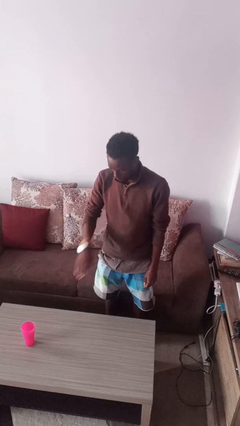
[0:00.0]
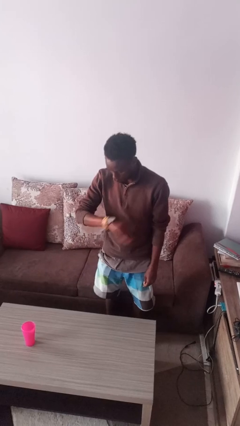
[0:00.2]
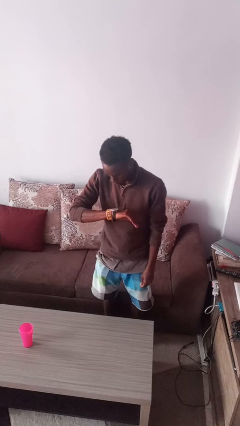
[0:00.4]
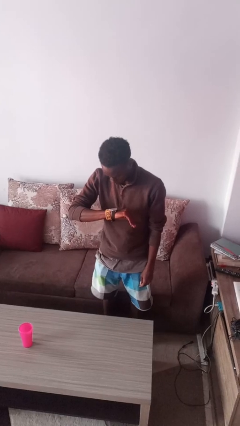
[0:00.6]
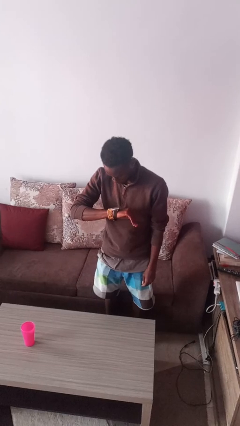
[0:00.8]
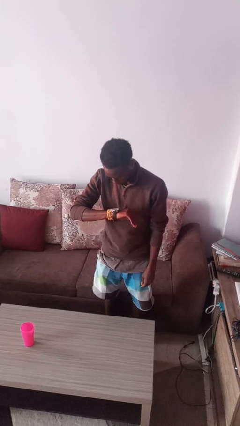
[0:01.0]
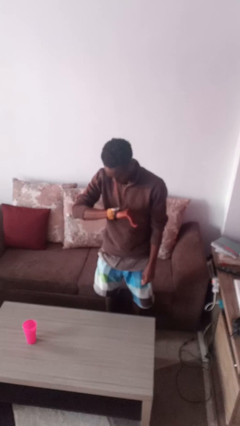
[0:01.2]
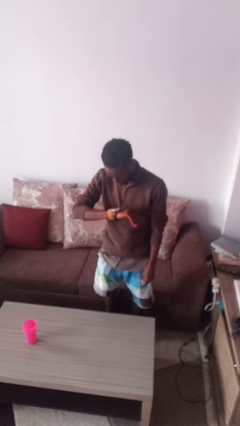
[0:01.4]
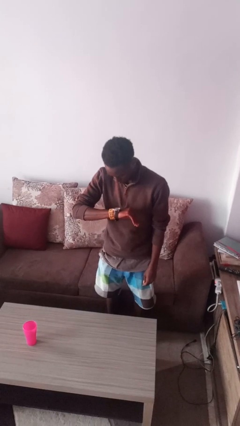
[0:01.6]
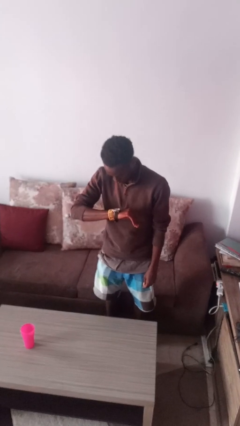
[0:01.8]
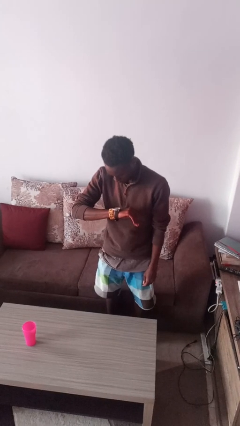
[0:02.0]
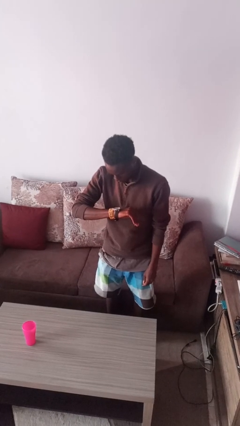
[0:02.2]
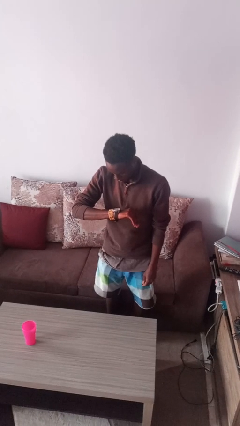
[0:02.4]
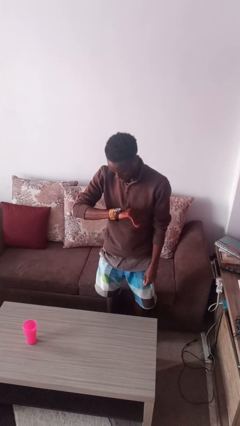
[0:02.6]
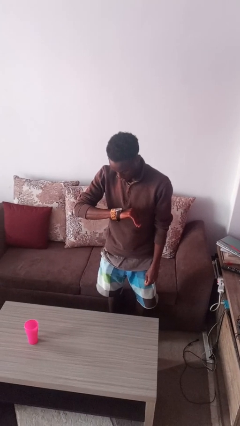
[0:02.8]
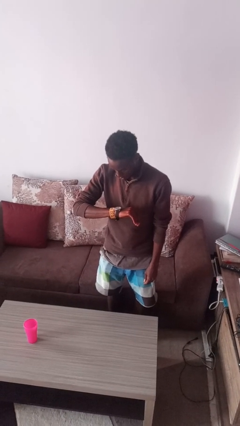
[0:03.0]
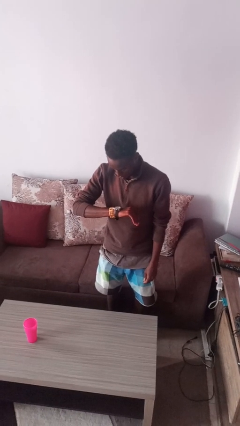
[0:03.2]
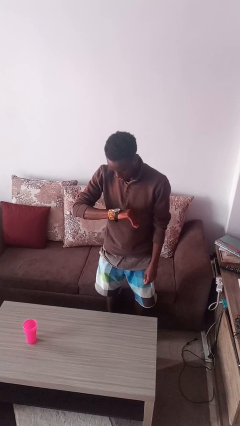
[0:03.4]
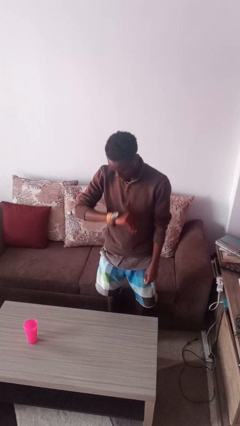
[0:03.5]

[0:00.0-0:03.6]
person looks at wristwatch

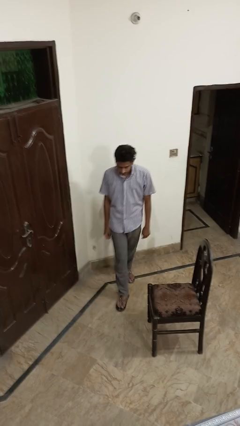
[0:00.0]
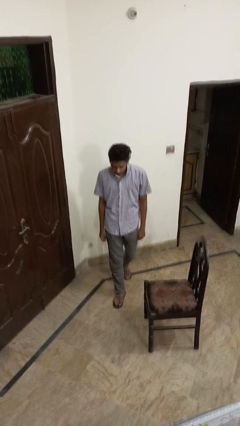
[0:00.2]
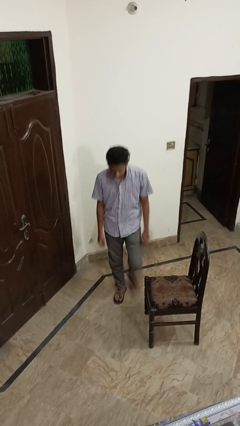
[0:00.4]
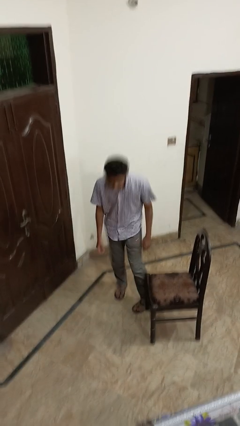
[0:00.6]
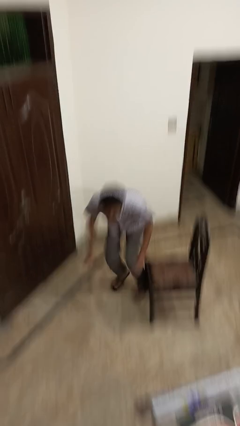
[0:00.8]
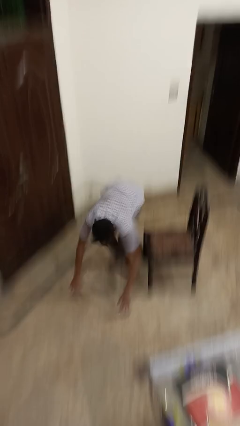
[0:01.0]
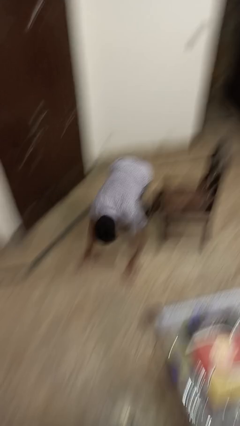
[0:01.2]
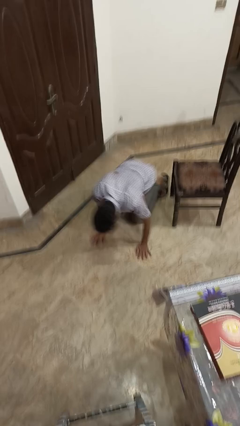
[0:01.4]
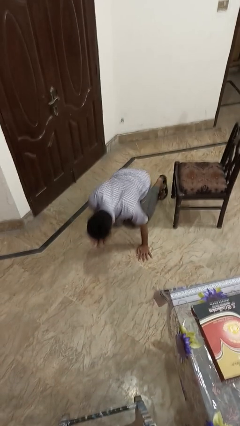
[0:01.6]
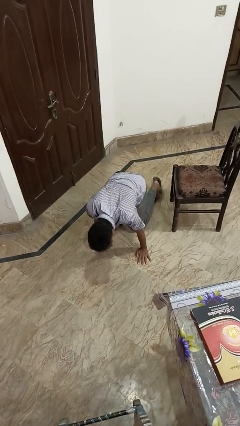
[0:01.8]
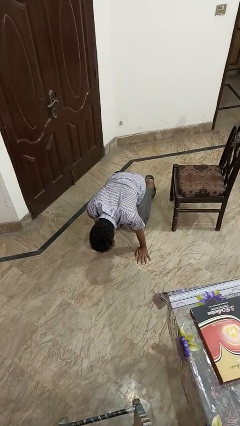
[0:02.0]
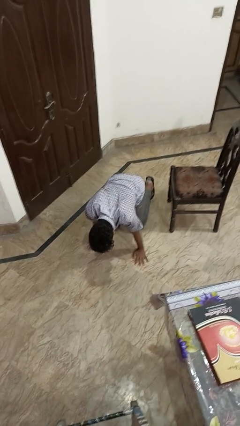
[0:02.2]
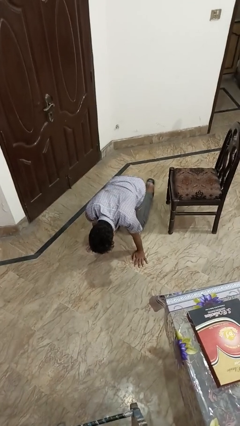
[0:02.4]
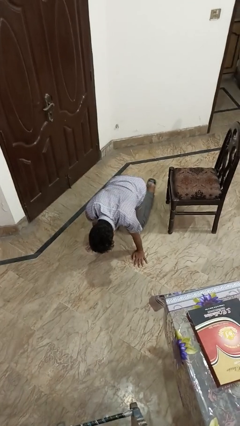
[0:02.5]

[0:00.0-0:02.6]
person trips on object on floor

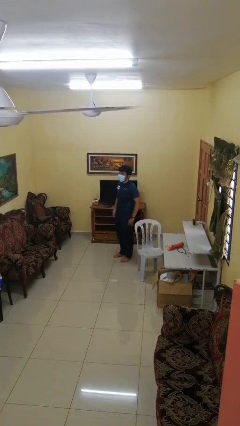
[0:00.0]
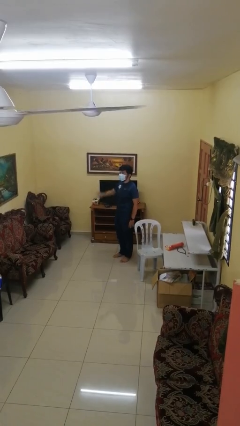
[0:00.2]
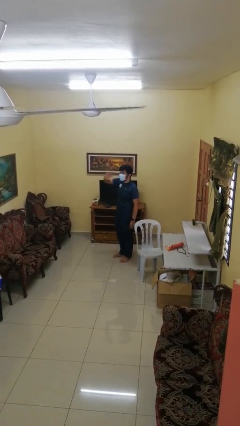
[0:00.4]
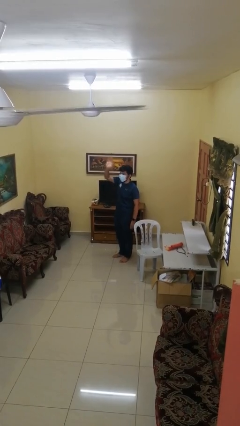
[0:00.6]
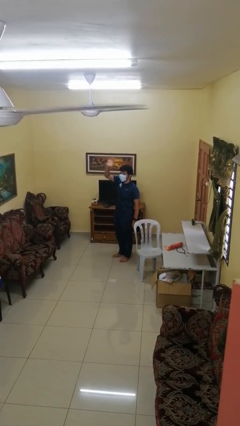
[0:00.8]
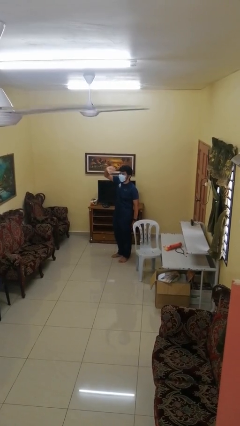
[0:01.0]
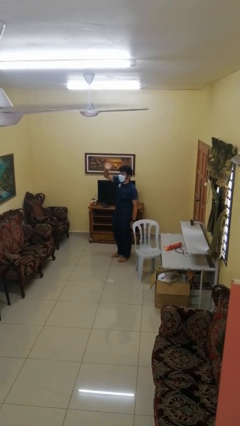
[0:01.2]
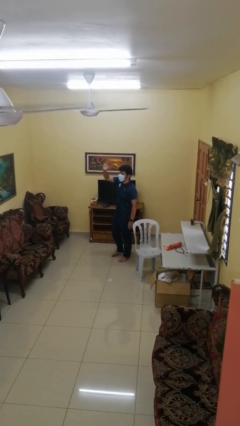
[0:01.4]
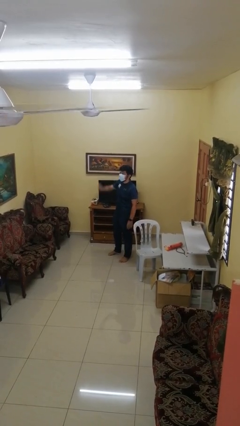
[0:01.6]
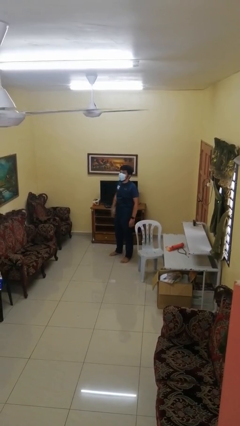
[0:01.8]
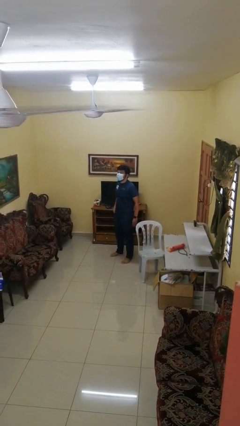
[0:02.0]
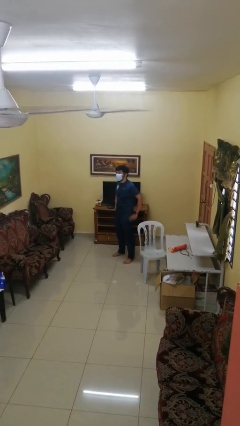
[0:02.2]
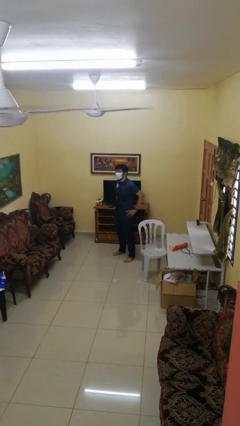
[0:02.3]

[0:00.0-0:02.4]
person waves at person

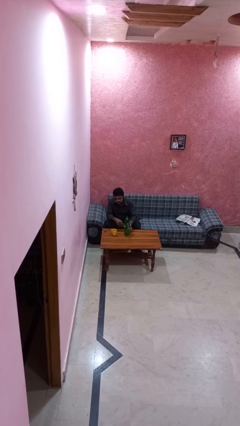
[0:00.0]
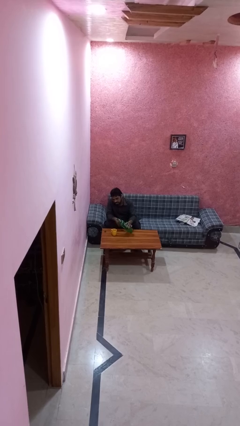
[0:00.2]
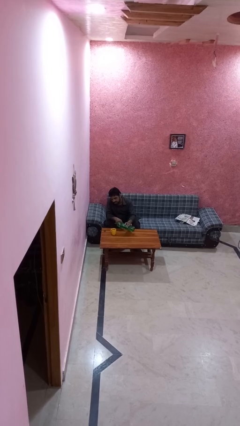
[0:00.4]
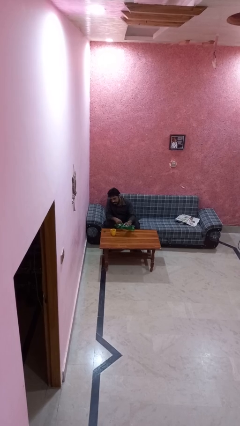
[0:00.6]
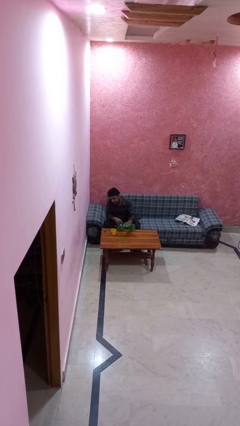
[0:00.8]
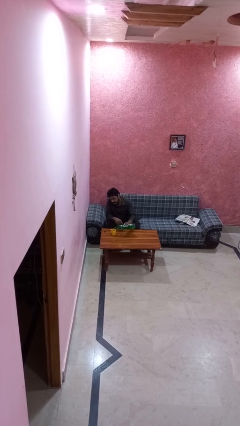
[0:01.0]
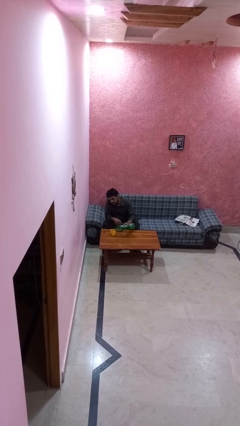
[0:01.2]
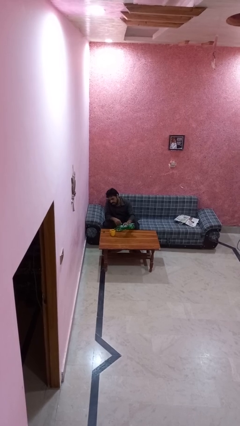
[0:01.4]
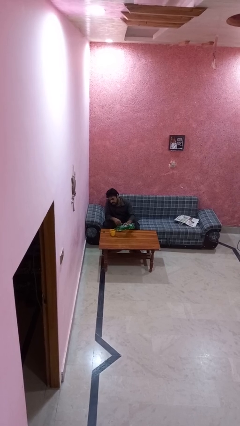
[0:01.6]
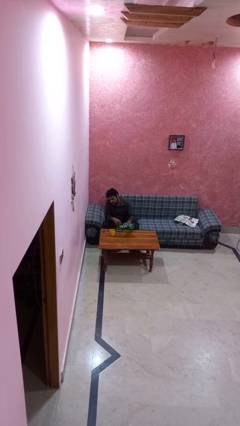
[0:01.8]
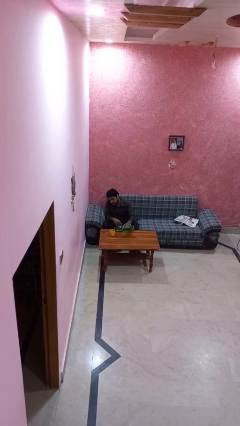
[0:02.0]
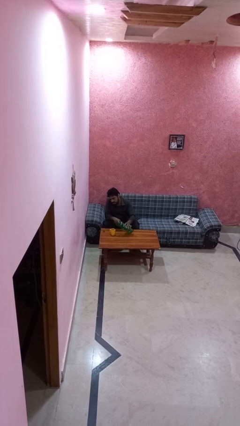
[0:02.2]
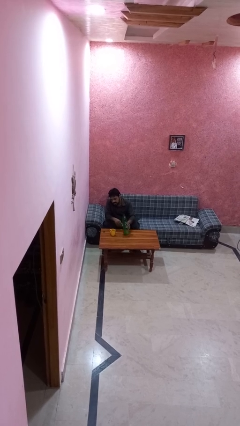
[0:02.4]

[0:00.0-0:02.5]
person pours liquid into cup

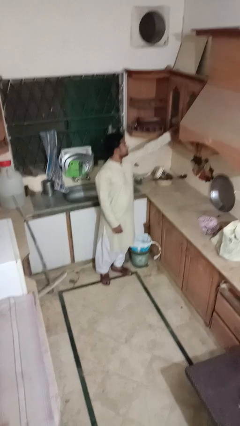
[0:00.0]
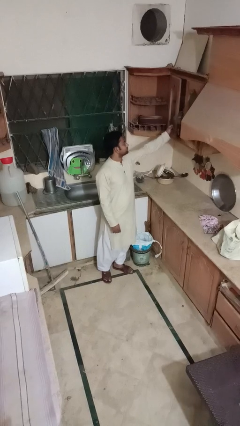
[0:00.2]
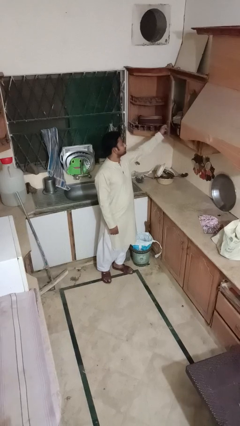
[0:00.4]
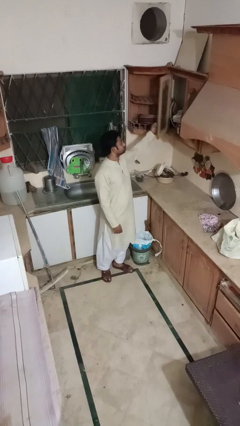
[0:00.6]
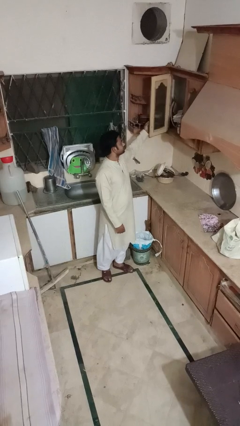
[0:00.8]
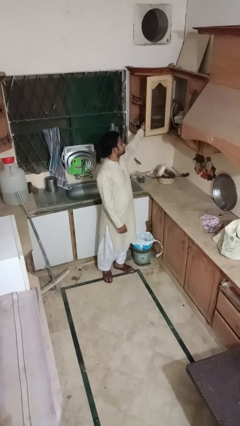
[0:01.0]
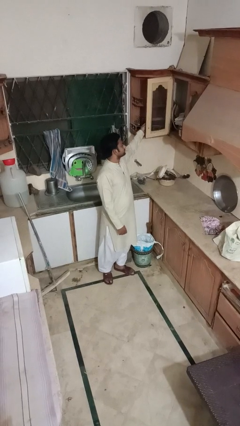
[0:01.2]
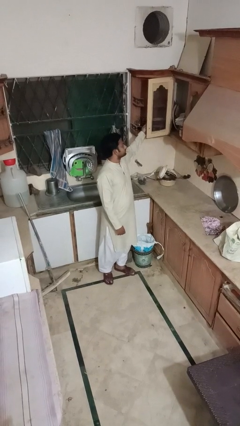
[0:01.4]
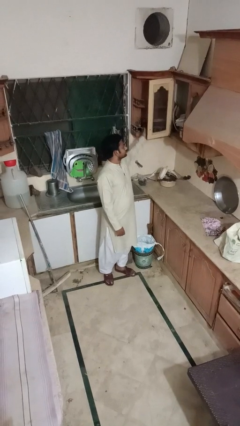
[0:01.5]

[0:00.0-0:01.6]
person opens cabinet

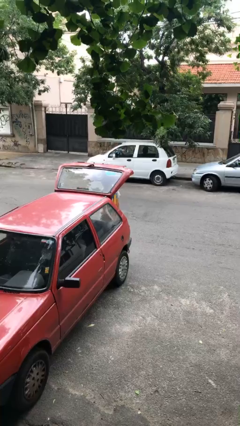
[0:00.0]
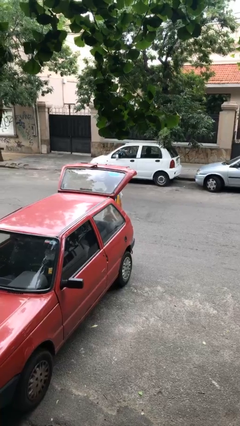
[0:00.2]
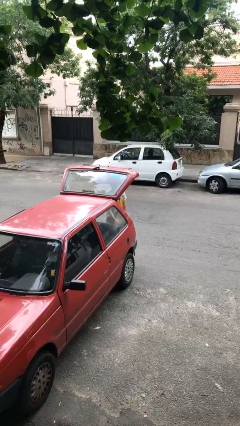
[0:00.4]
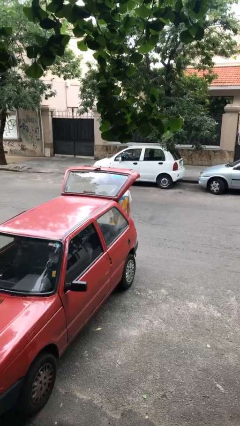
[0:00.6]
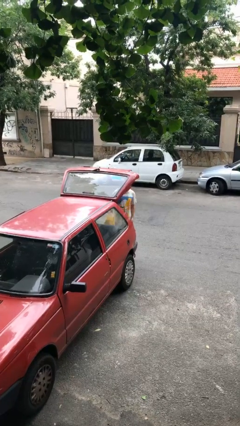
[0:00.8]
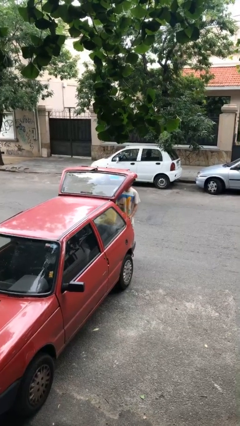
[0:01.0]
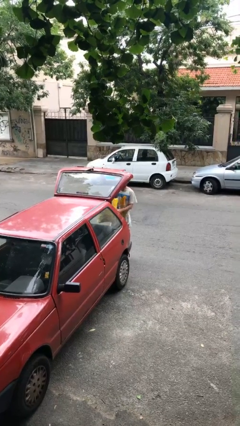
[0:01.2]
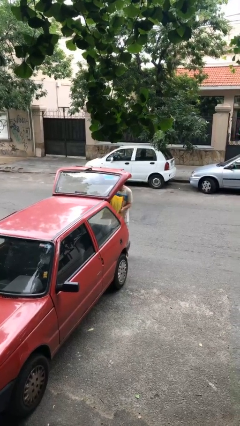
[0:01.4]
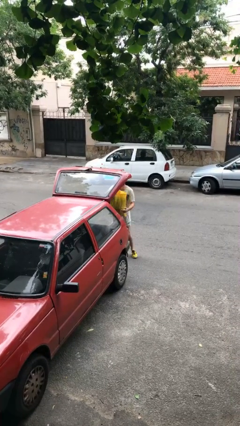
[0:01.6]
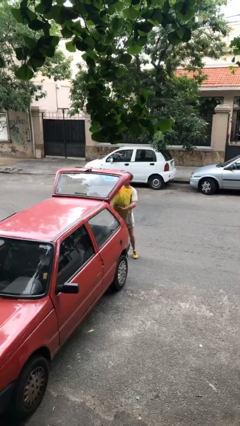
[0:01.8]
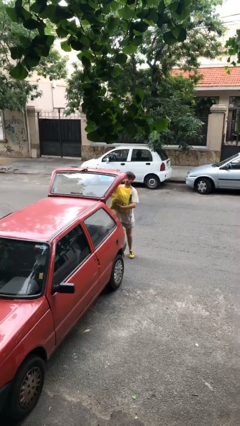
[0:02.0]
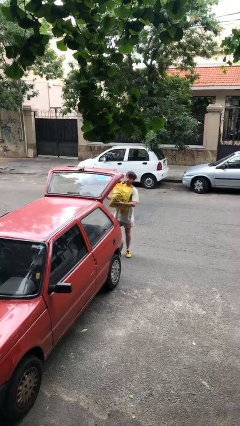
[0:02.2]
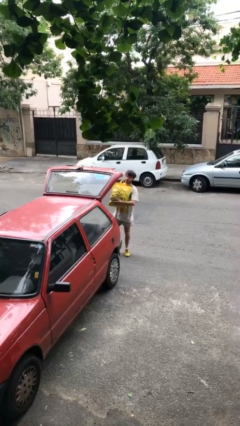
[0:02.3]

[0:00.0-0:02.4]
person unloads car

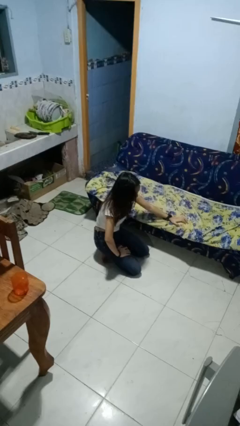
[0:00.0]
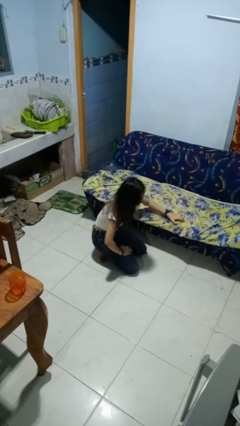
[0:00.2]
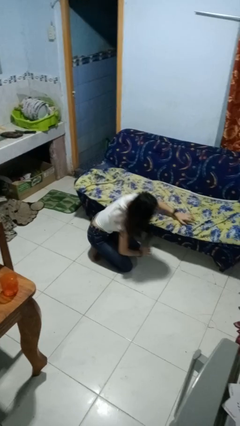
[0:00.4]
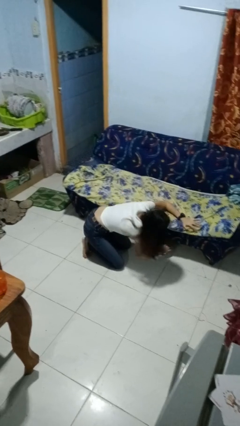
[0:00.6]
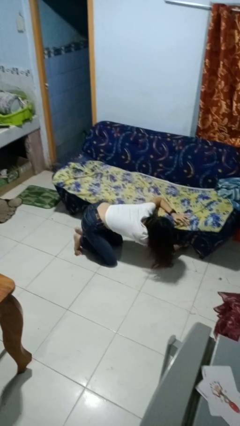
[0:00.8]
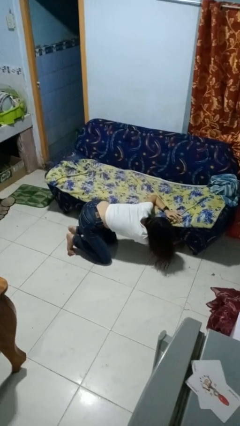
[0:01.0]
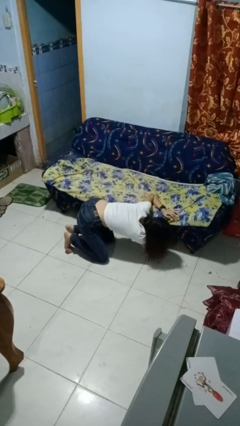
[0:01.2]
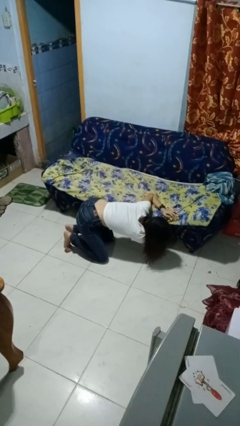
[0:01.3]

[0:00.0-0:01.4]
person searches in couch

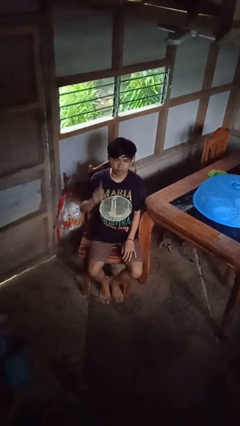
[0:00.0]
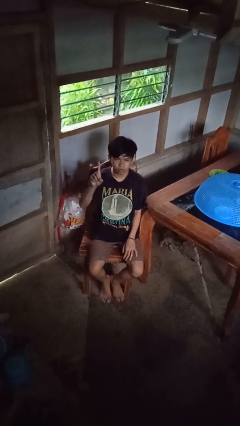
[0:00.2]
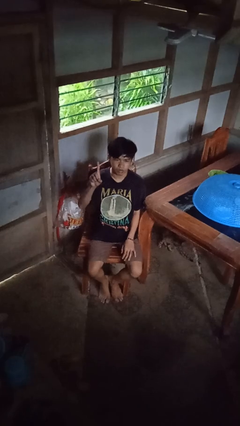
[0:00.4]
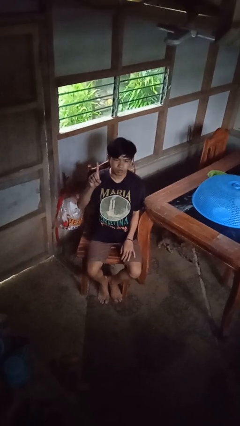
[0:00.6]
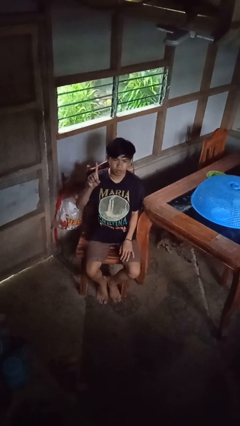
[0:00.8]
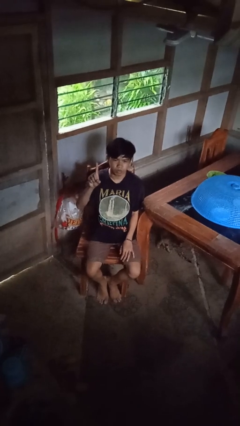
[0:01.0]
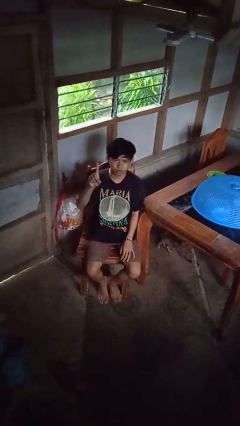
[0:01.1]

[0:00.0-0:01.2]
person gestures number one
